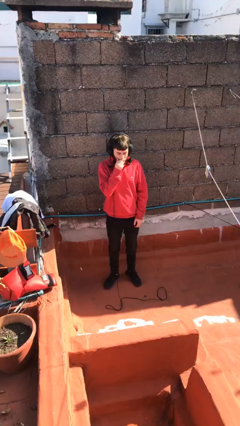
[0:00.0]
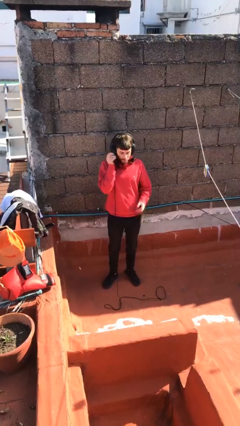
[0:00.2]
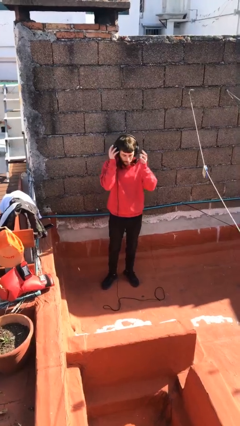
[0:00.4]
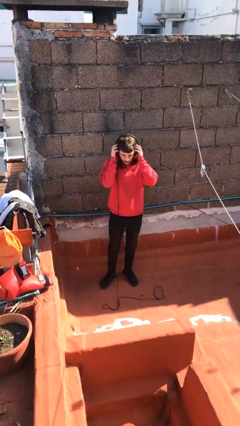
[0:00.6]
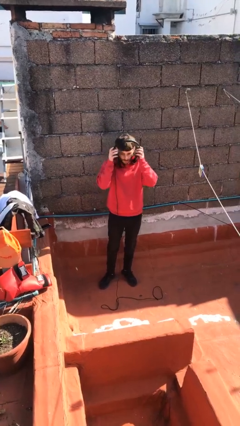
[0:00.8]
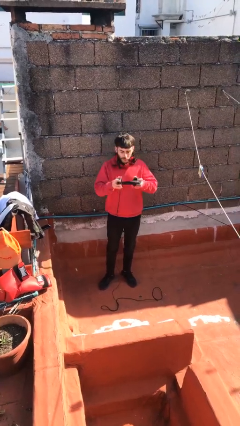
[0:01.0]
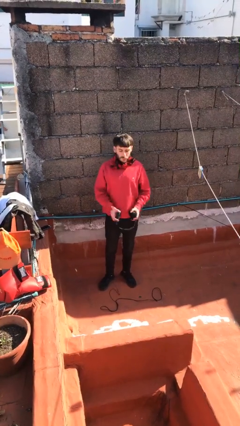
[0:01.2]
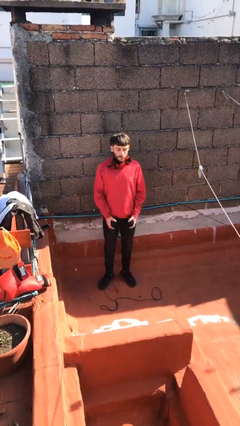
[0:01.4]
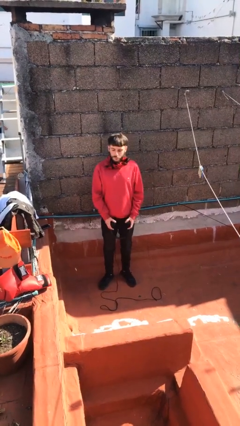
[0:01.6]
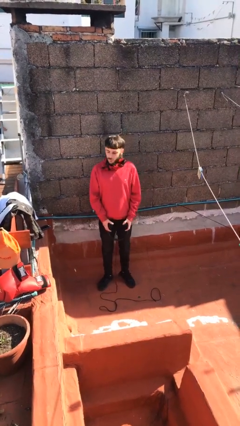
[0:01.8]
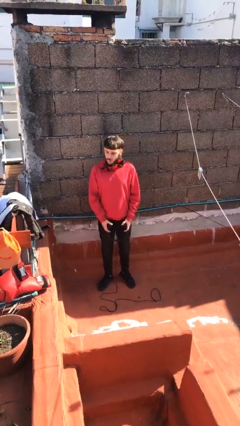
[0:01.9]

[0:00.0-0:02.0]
person takes off headphones

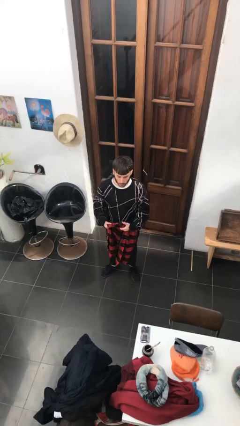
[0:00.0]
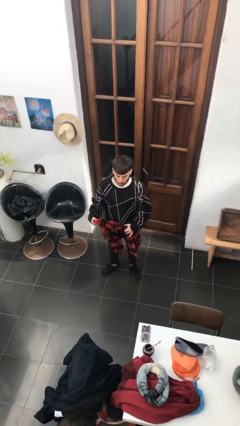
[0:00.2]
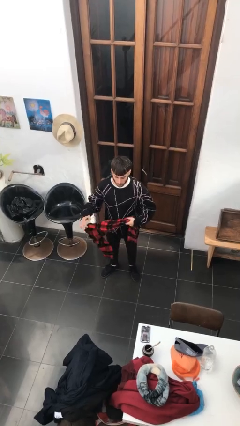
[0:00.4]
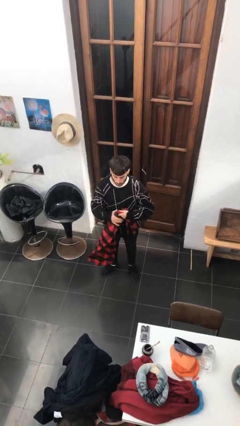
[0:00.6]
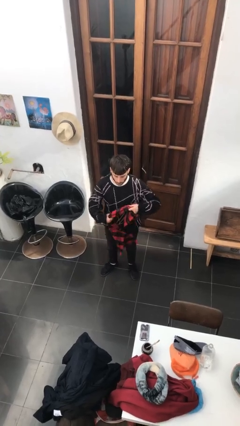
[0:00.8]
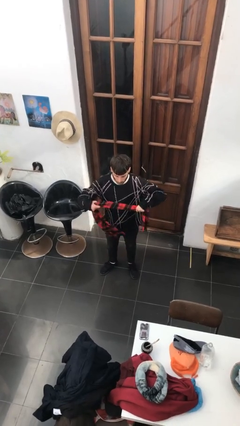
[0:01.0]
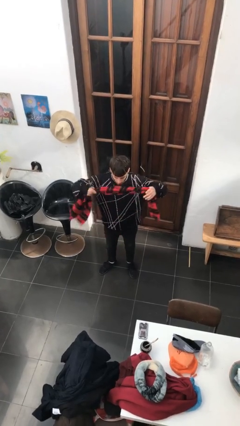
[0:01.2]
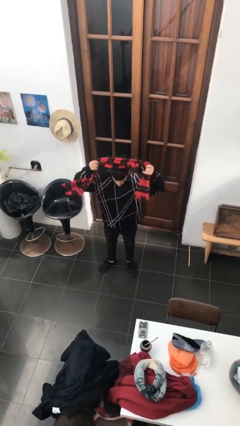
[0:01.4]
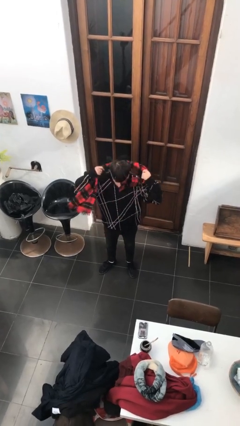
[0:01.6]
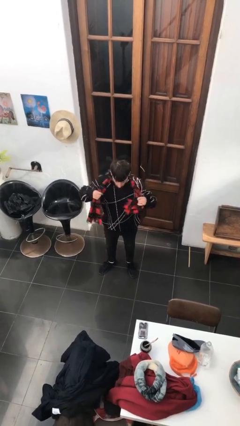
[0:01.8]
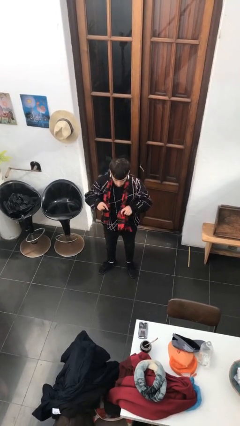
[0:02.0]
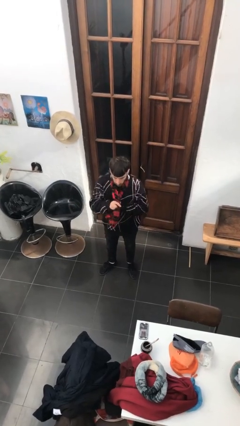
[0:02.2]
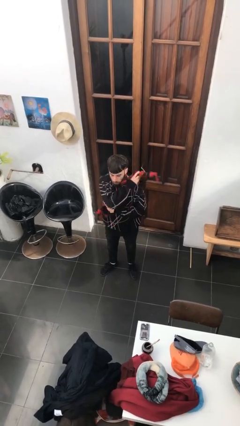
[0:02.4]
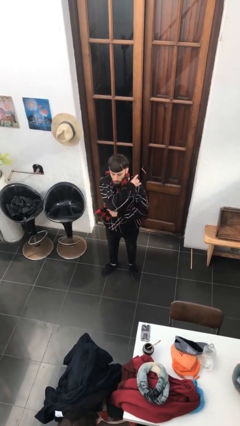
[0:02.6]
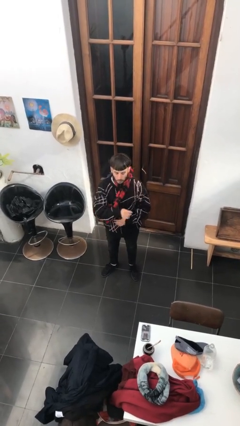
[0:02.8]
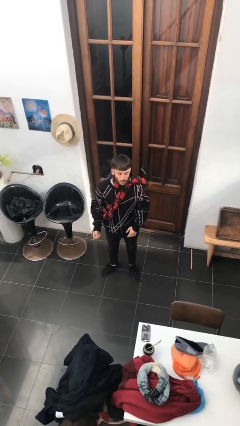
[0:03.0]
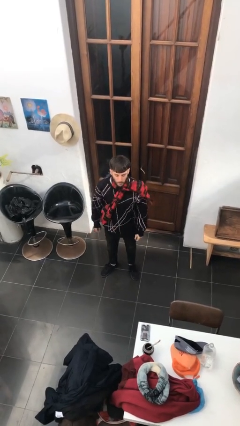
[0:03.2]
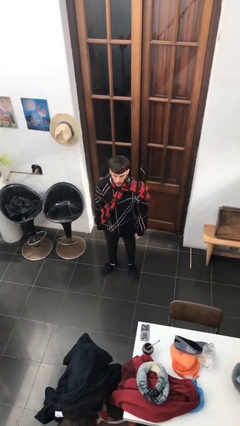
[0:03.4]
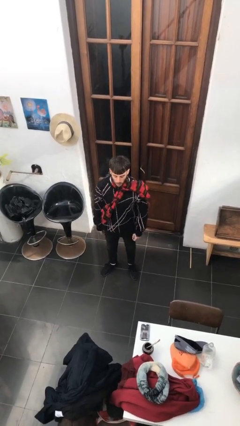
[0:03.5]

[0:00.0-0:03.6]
person puts on scarf

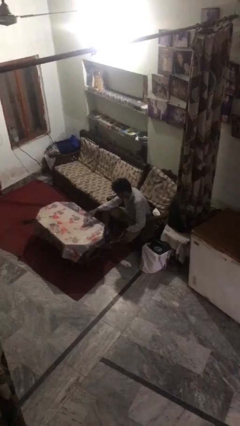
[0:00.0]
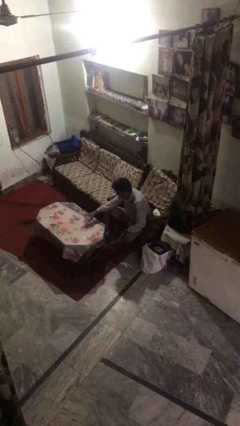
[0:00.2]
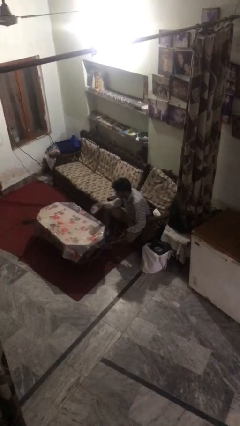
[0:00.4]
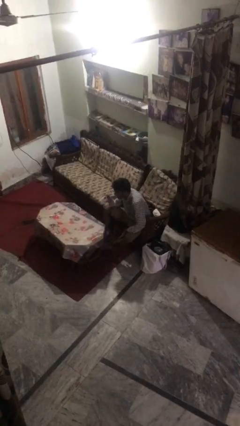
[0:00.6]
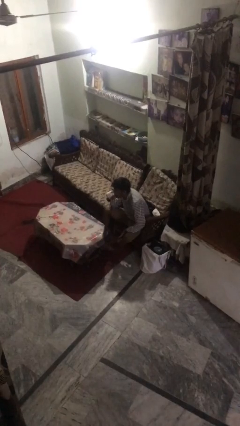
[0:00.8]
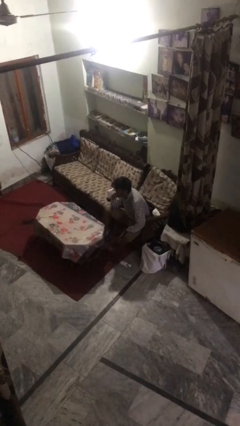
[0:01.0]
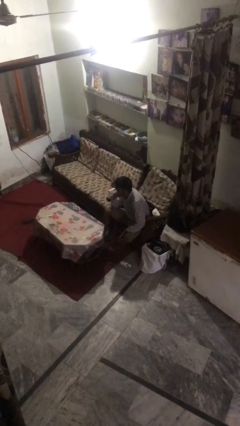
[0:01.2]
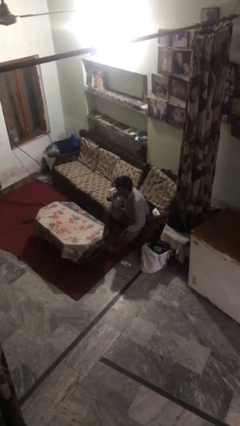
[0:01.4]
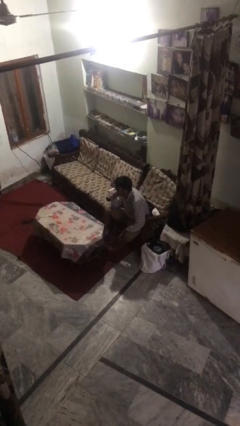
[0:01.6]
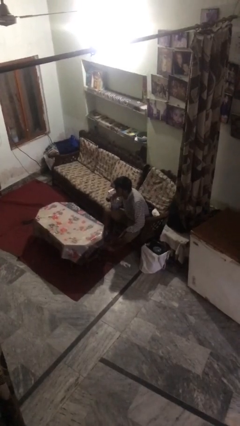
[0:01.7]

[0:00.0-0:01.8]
person drinks from mug

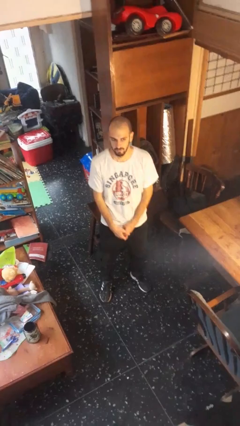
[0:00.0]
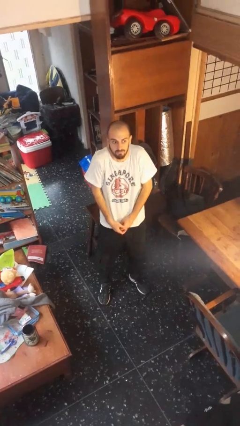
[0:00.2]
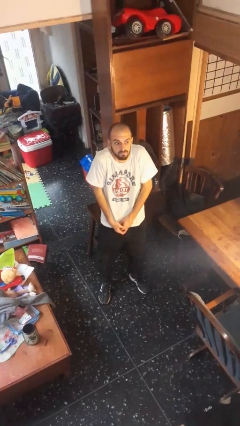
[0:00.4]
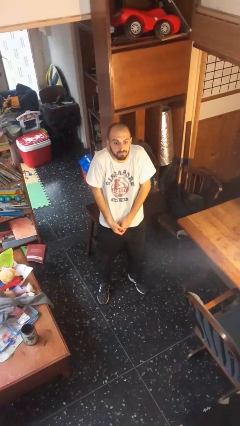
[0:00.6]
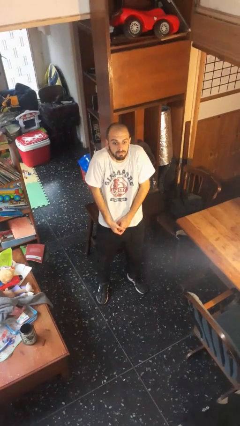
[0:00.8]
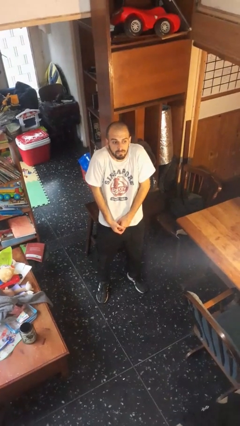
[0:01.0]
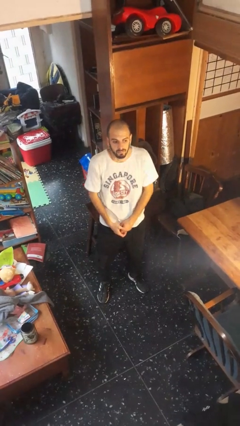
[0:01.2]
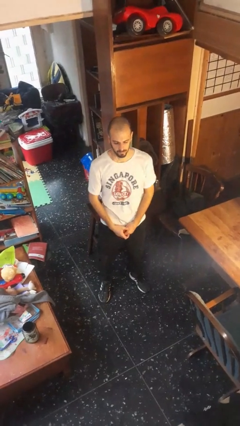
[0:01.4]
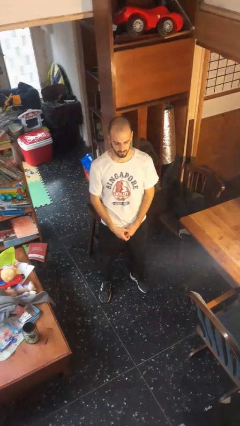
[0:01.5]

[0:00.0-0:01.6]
person shrugs

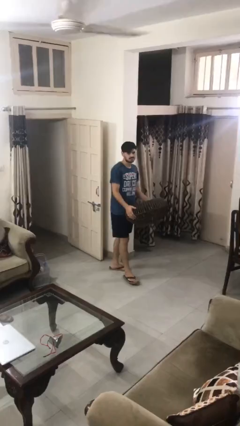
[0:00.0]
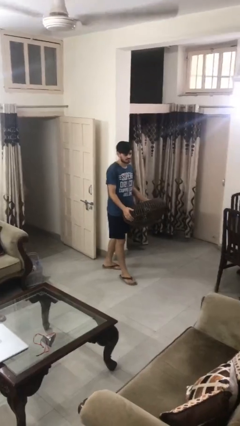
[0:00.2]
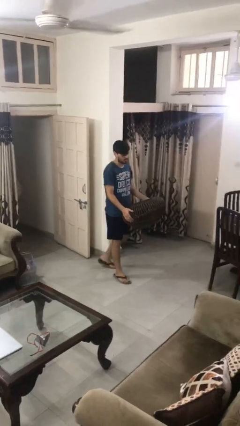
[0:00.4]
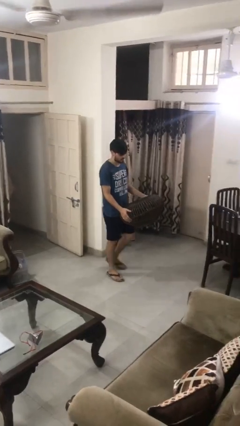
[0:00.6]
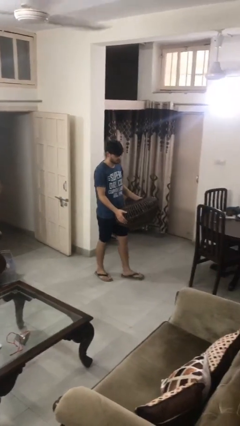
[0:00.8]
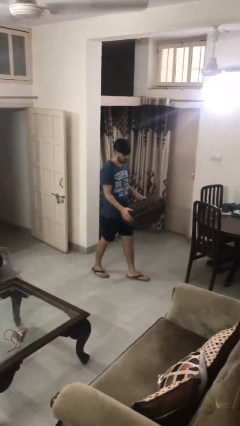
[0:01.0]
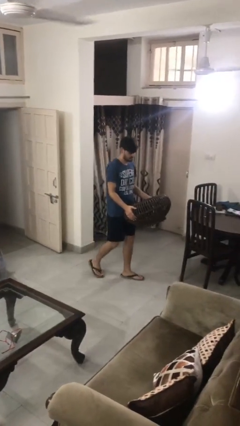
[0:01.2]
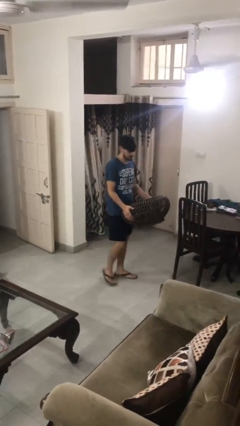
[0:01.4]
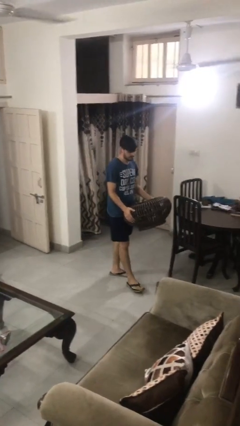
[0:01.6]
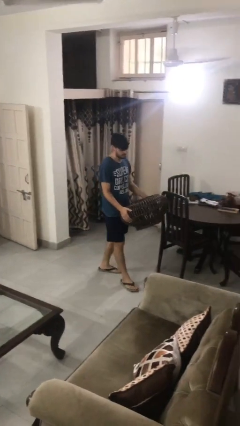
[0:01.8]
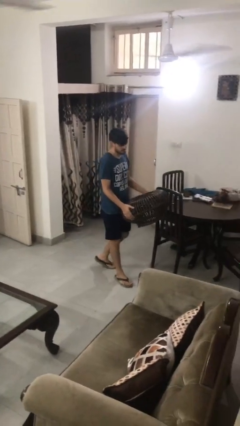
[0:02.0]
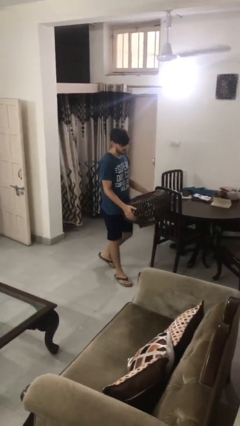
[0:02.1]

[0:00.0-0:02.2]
person carries furniture

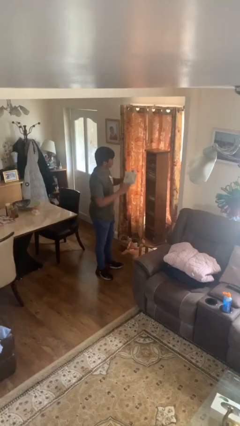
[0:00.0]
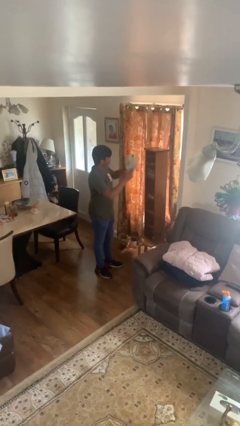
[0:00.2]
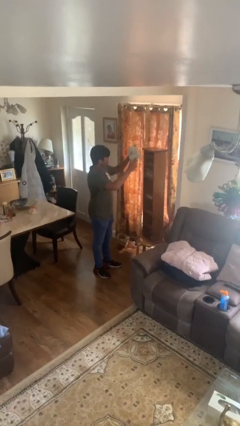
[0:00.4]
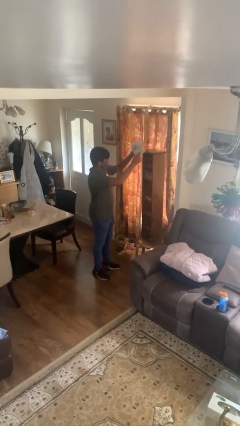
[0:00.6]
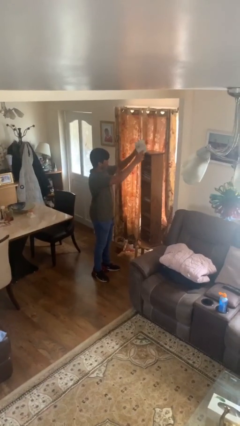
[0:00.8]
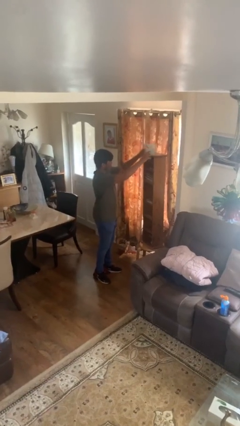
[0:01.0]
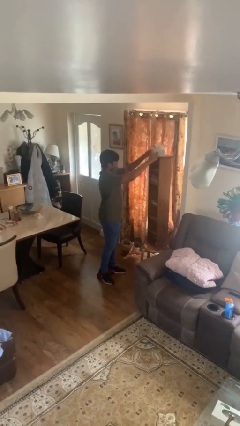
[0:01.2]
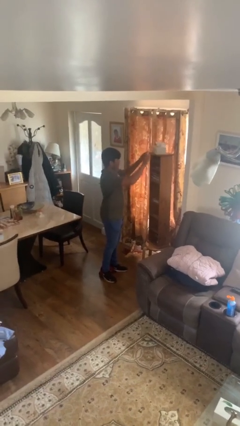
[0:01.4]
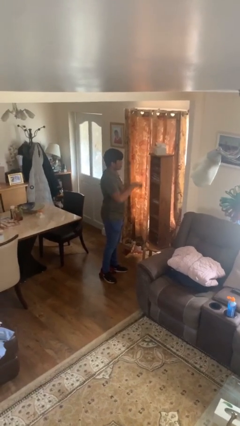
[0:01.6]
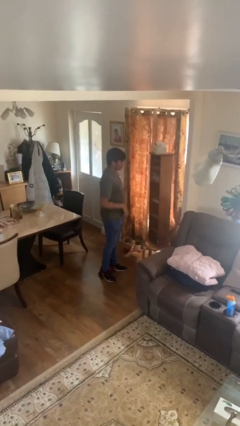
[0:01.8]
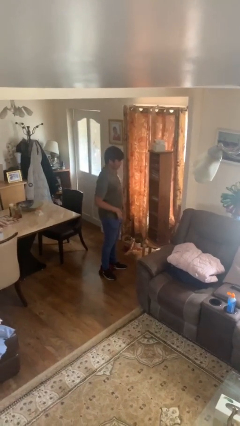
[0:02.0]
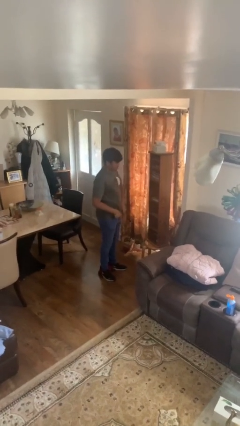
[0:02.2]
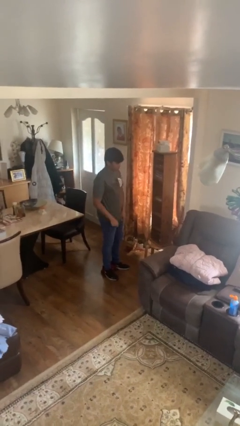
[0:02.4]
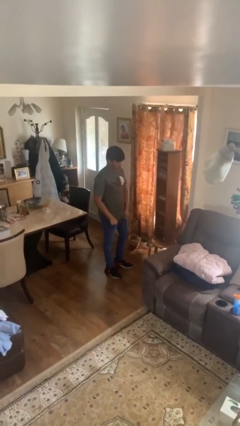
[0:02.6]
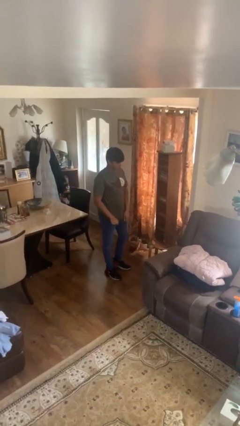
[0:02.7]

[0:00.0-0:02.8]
person puts down object on shelf

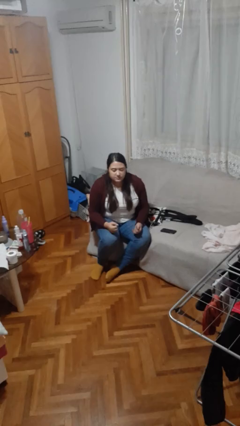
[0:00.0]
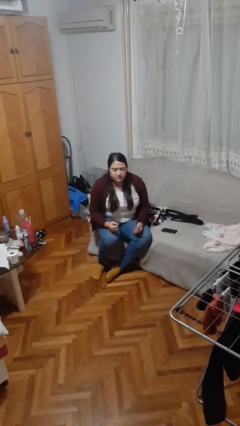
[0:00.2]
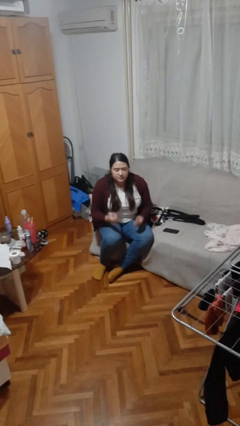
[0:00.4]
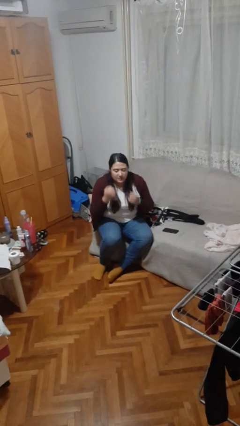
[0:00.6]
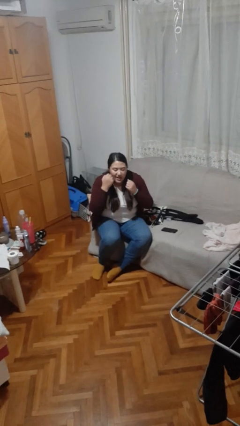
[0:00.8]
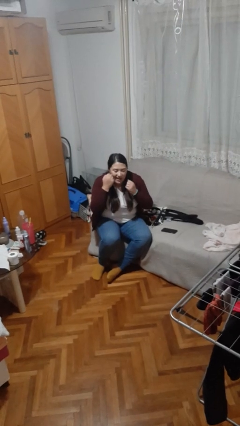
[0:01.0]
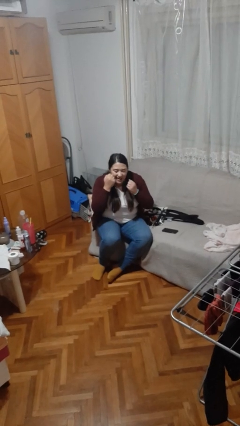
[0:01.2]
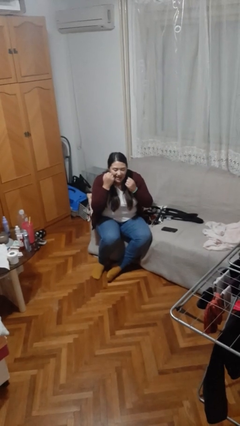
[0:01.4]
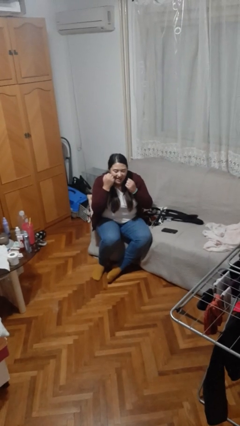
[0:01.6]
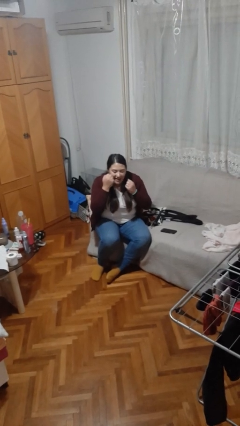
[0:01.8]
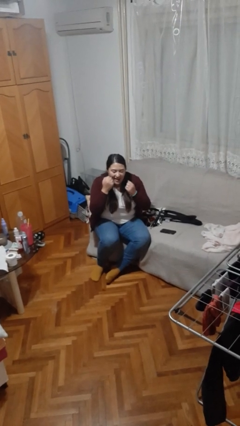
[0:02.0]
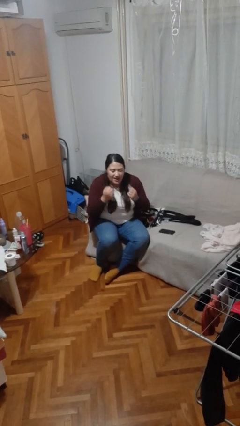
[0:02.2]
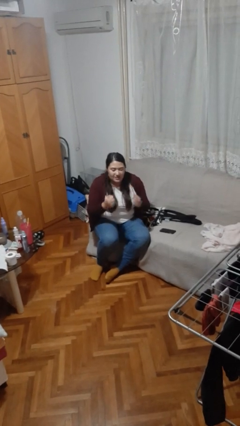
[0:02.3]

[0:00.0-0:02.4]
person flosses

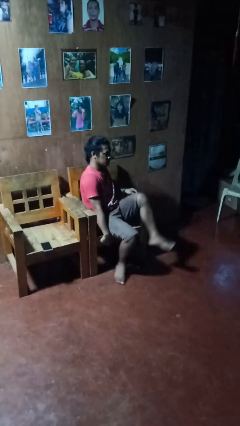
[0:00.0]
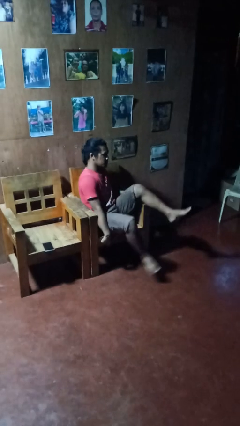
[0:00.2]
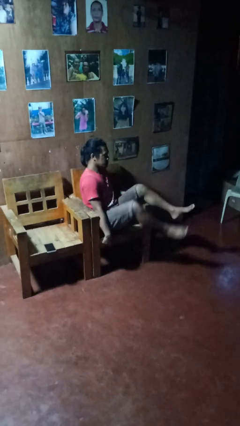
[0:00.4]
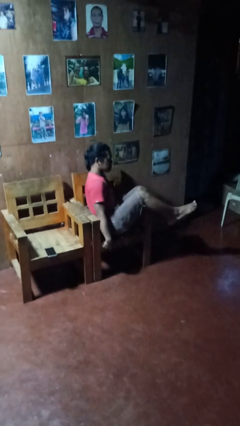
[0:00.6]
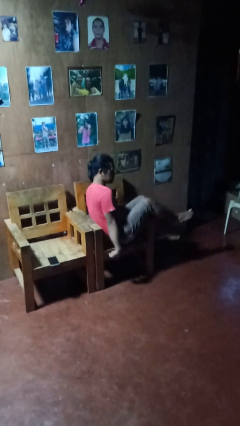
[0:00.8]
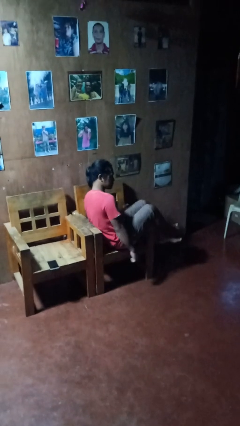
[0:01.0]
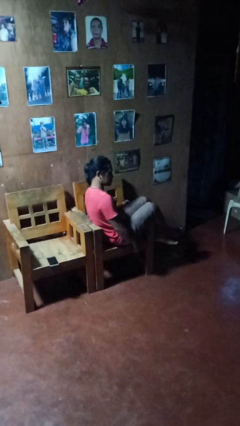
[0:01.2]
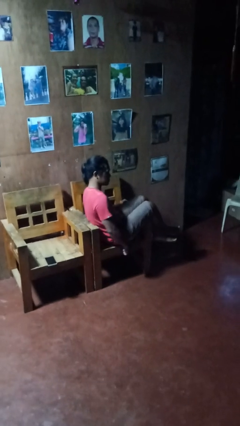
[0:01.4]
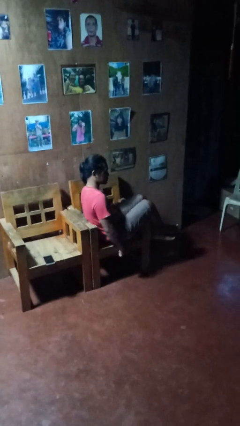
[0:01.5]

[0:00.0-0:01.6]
person sits down